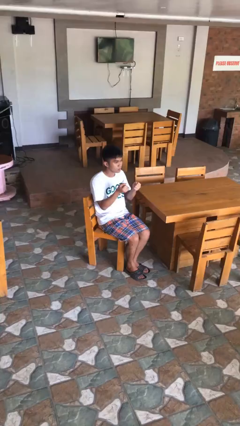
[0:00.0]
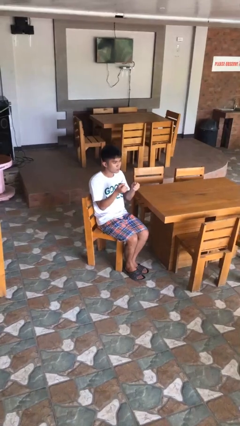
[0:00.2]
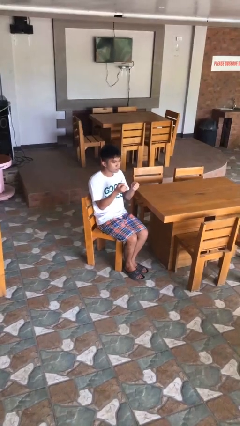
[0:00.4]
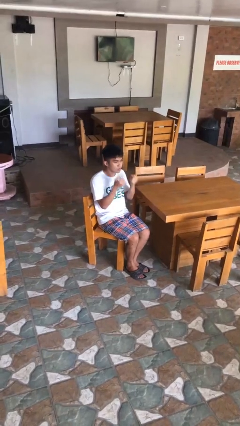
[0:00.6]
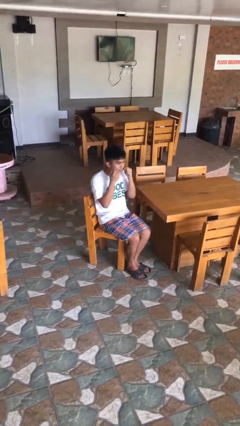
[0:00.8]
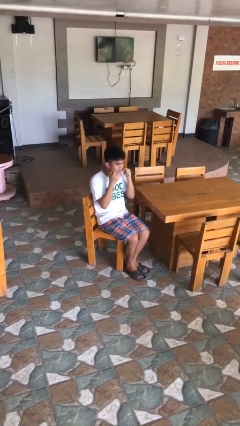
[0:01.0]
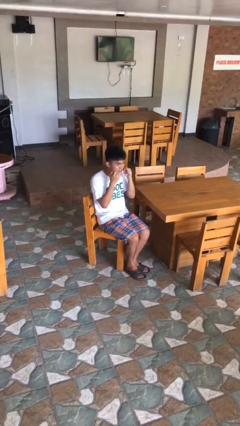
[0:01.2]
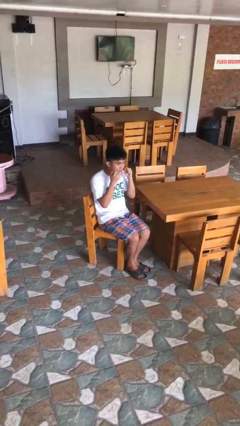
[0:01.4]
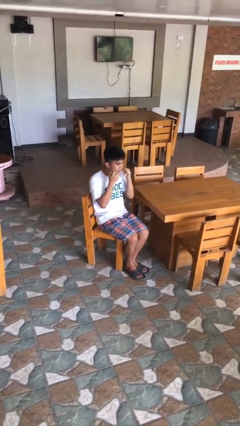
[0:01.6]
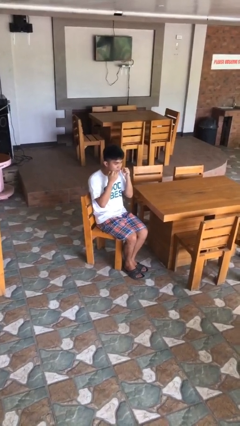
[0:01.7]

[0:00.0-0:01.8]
person flosses

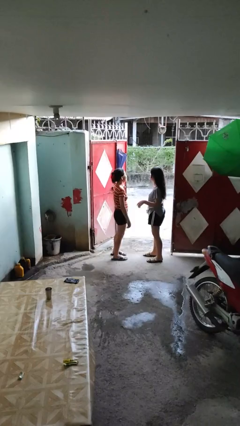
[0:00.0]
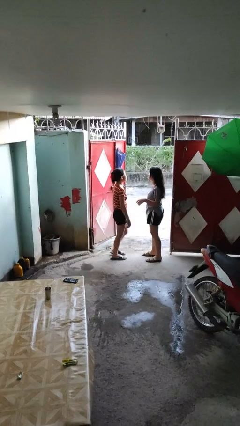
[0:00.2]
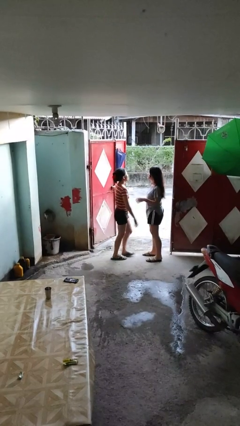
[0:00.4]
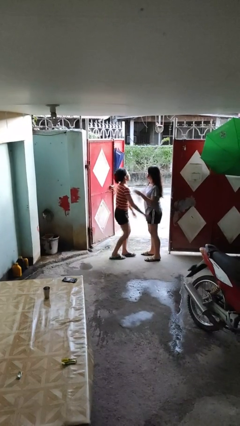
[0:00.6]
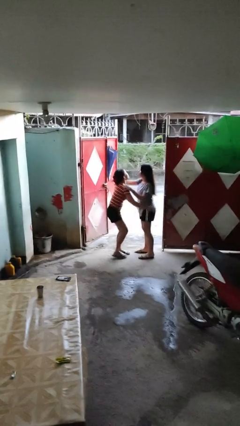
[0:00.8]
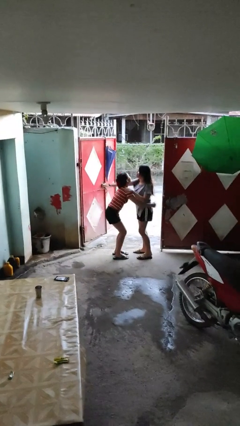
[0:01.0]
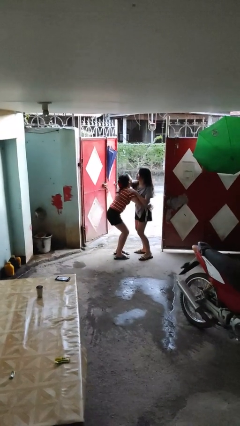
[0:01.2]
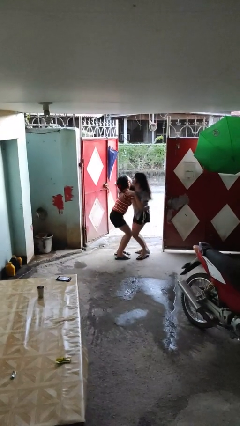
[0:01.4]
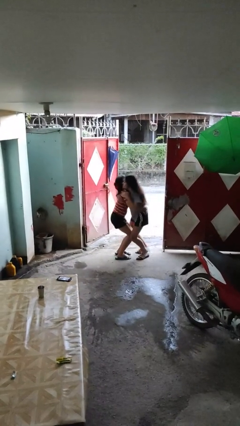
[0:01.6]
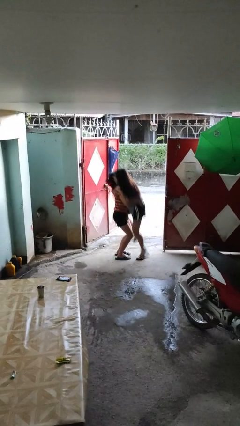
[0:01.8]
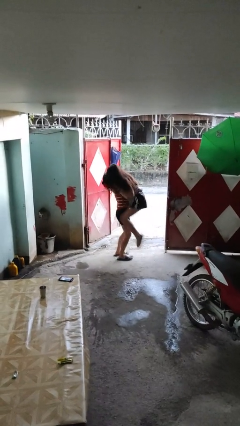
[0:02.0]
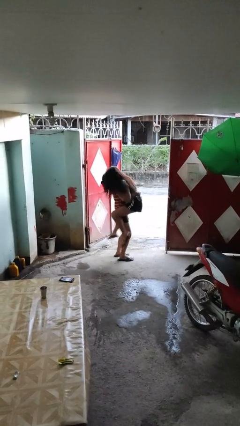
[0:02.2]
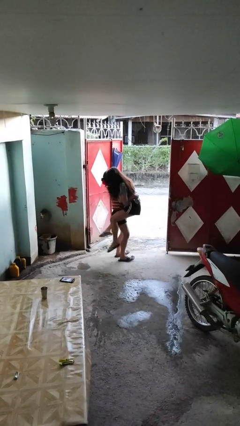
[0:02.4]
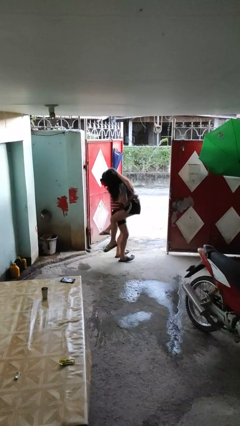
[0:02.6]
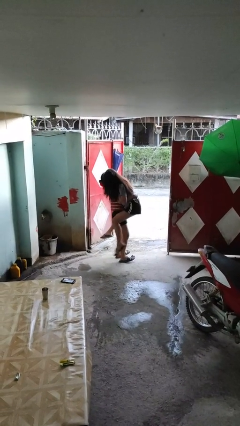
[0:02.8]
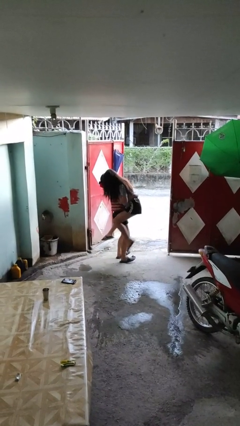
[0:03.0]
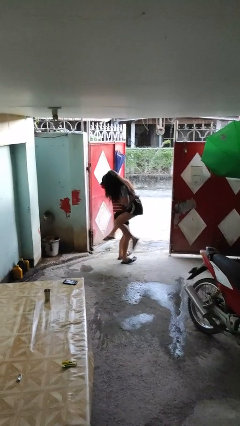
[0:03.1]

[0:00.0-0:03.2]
person picks up person

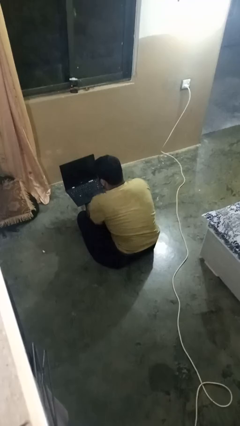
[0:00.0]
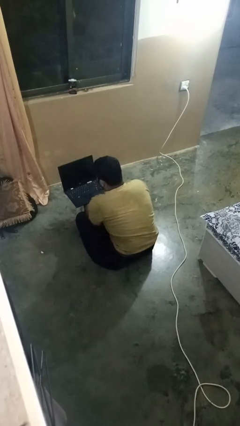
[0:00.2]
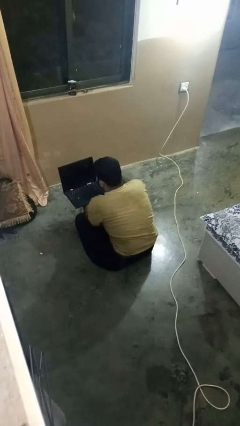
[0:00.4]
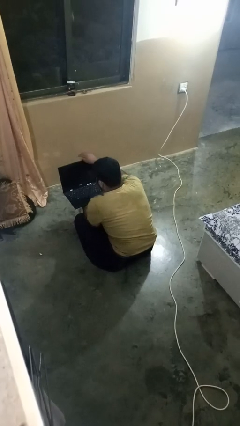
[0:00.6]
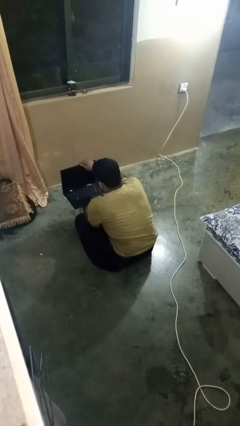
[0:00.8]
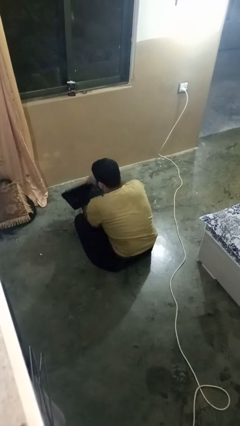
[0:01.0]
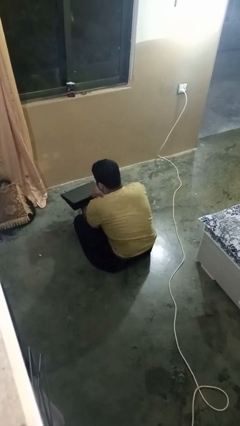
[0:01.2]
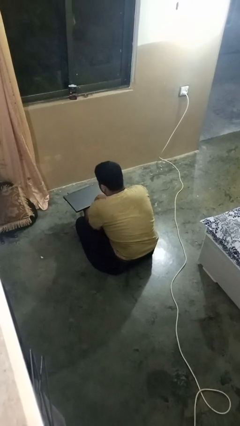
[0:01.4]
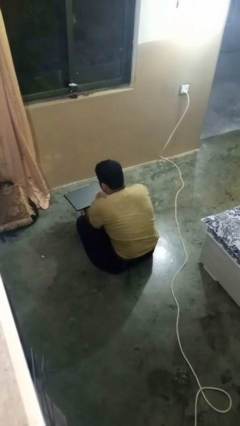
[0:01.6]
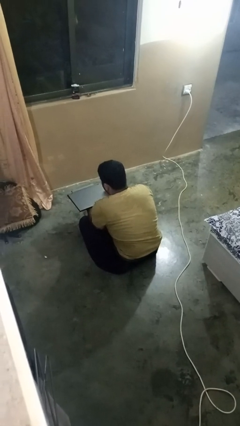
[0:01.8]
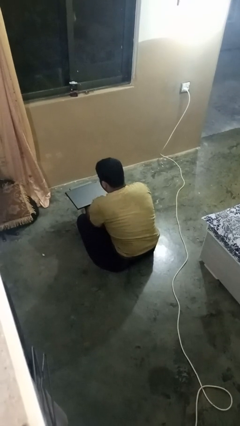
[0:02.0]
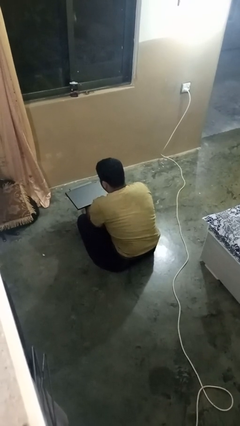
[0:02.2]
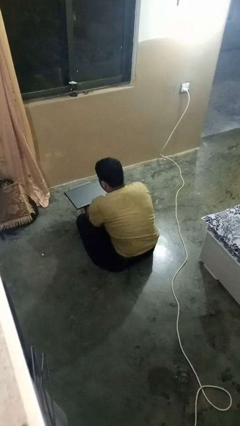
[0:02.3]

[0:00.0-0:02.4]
person closes laptop

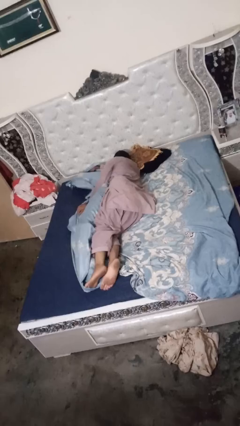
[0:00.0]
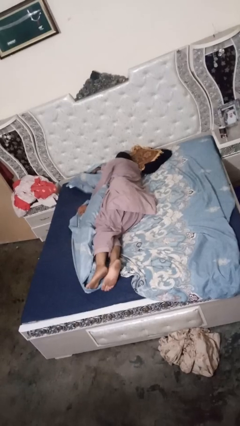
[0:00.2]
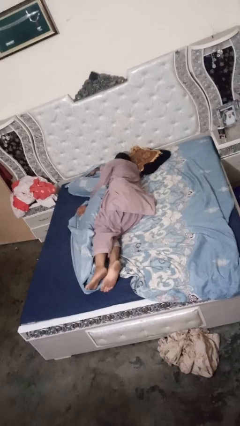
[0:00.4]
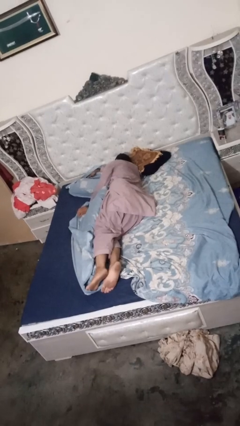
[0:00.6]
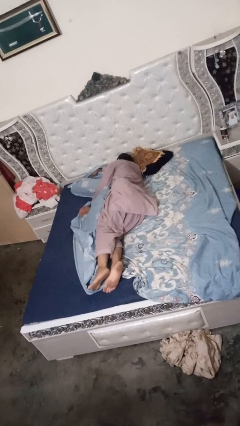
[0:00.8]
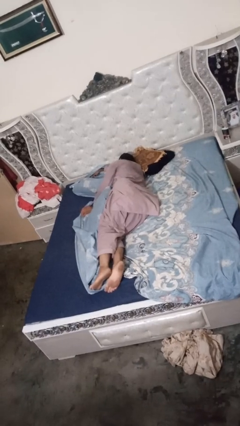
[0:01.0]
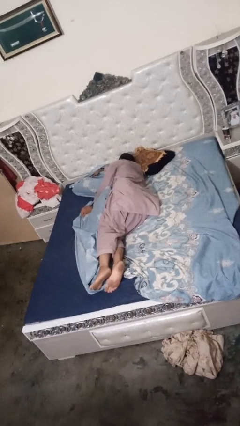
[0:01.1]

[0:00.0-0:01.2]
person uncovers with bedsheets

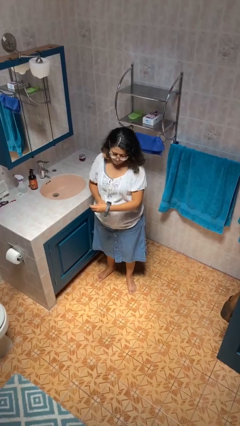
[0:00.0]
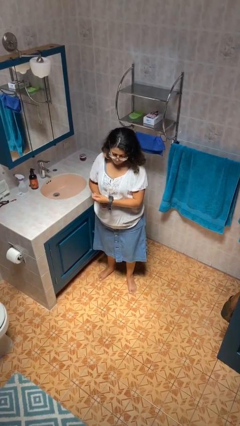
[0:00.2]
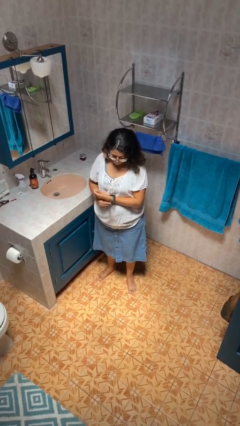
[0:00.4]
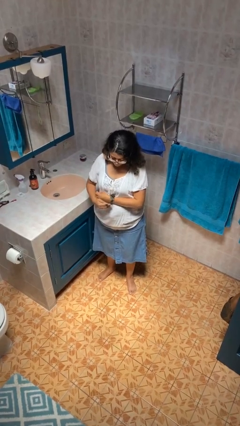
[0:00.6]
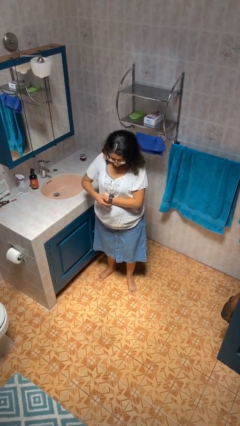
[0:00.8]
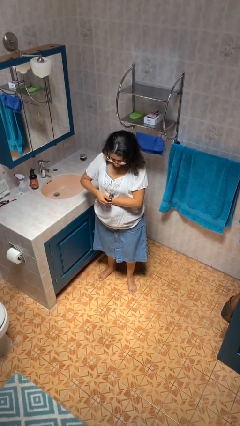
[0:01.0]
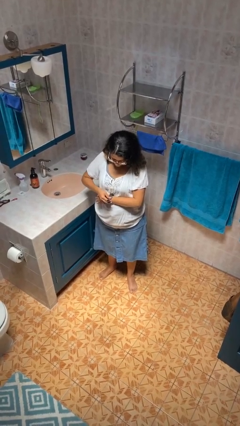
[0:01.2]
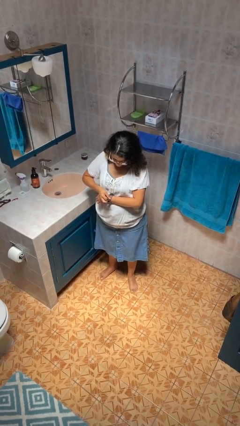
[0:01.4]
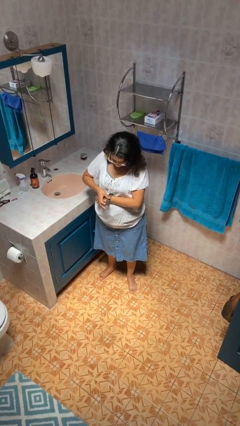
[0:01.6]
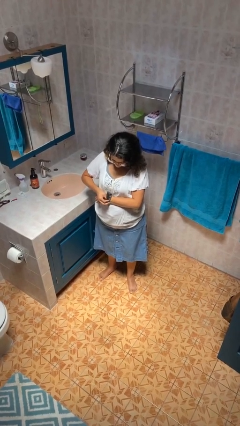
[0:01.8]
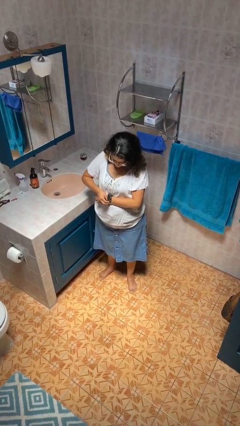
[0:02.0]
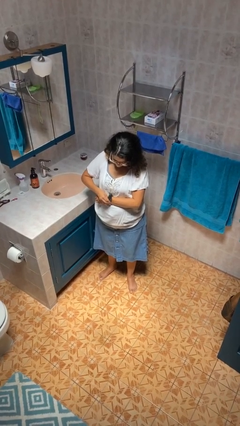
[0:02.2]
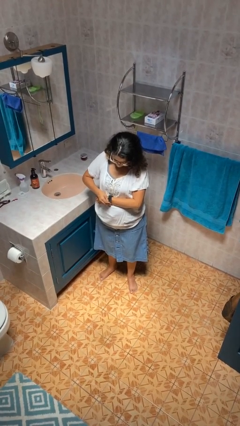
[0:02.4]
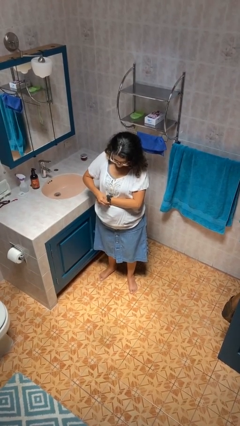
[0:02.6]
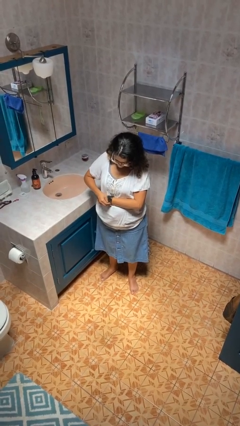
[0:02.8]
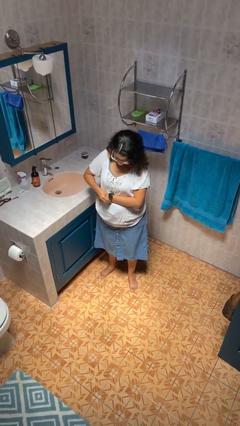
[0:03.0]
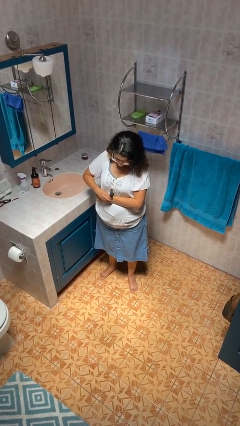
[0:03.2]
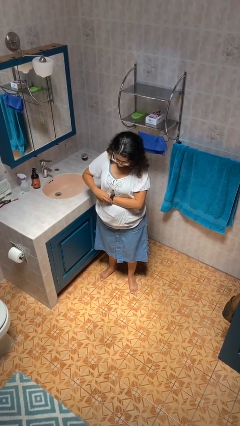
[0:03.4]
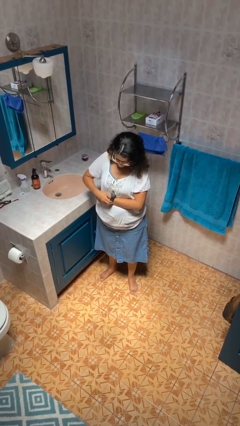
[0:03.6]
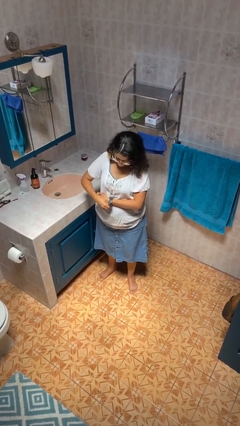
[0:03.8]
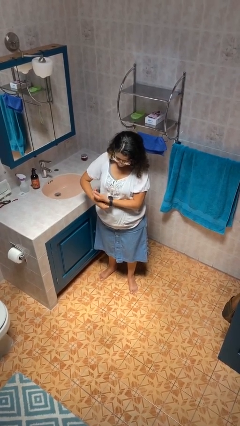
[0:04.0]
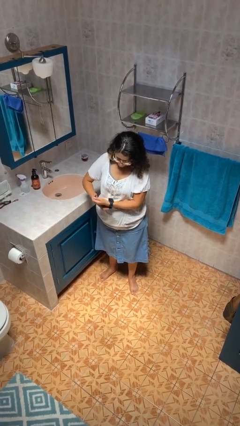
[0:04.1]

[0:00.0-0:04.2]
person puts on wristwatch

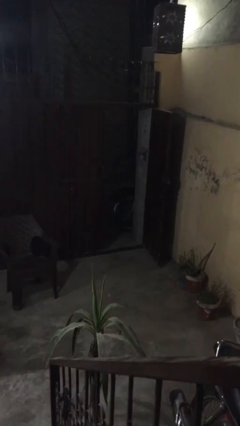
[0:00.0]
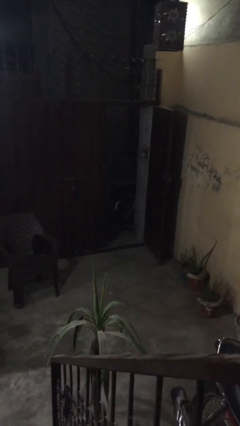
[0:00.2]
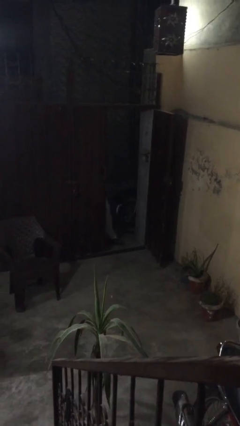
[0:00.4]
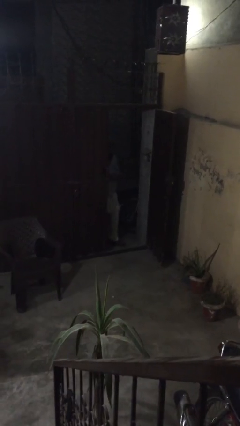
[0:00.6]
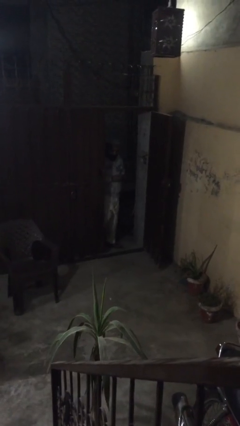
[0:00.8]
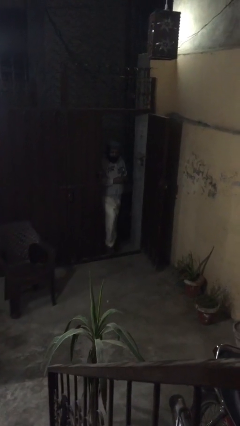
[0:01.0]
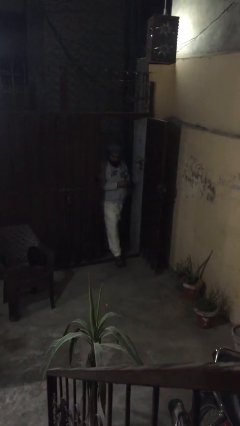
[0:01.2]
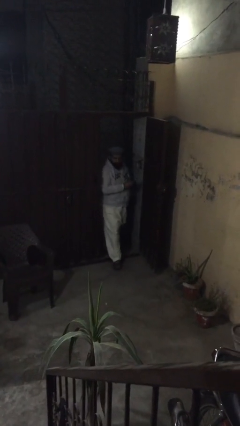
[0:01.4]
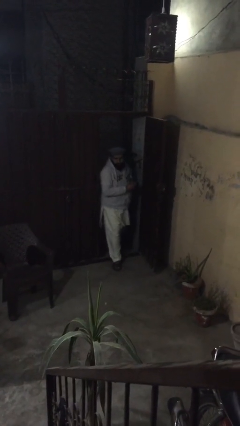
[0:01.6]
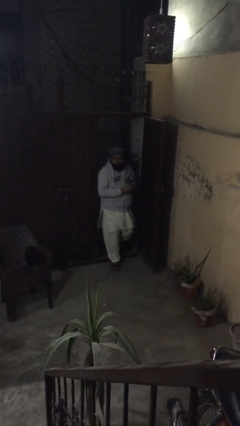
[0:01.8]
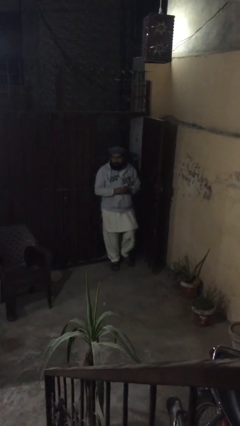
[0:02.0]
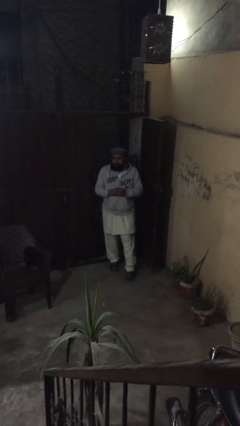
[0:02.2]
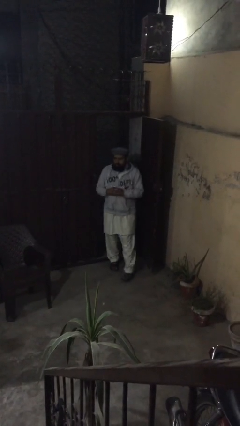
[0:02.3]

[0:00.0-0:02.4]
person enters scene through structure

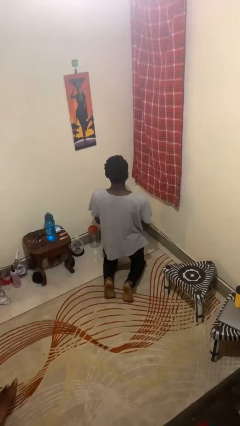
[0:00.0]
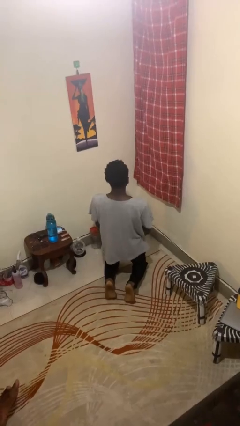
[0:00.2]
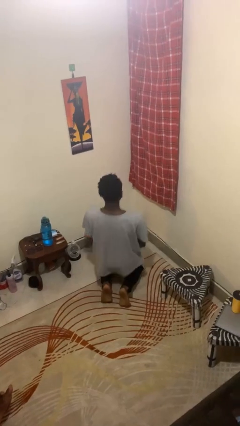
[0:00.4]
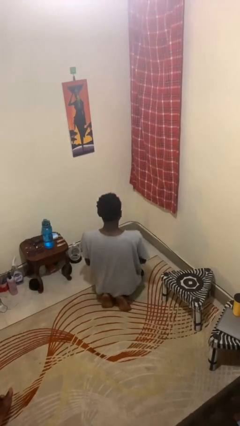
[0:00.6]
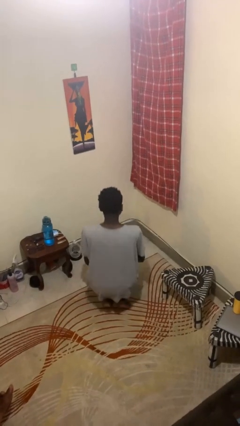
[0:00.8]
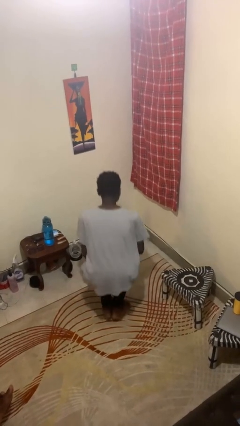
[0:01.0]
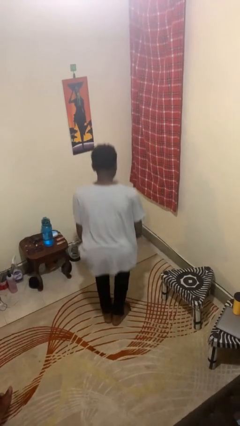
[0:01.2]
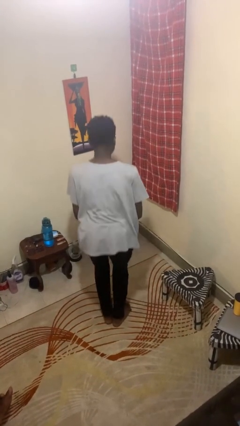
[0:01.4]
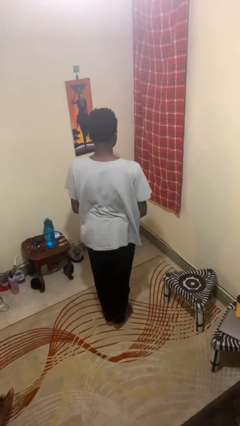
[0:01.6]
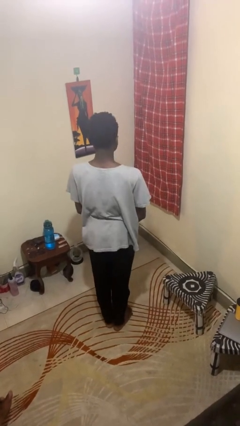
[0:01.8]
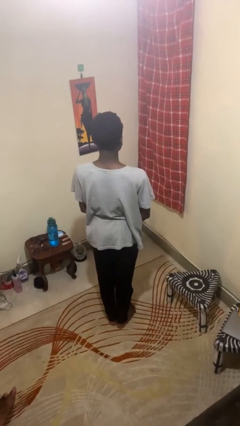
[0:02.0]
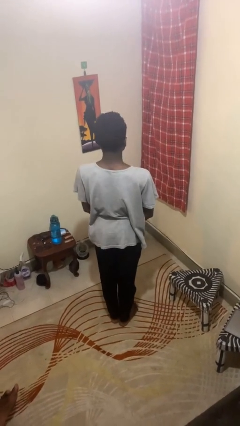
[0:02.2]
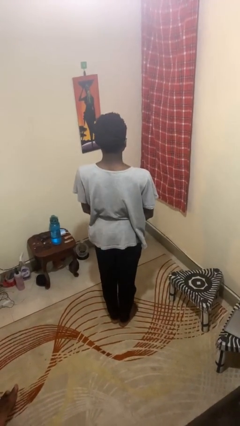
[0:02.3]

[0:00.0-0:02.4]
person stands up from floor
